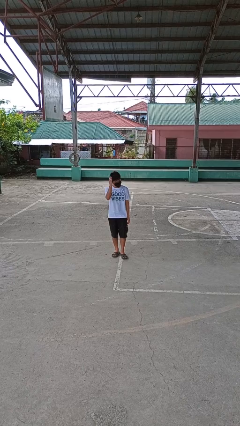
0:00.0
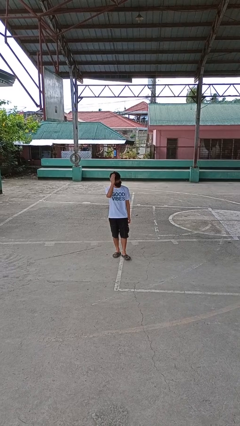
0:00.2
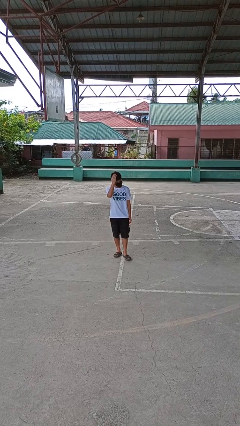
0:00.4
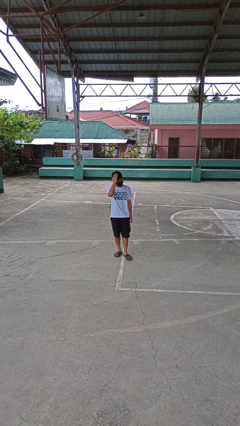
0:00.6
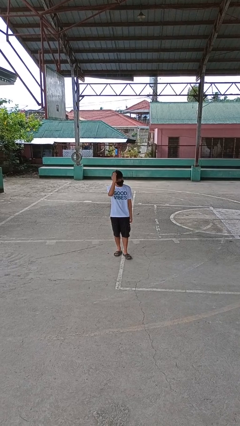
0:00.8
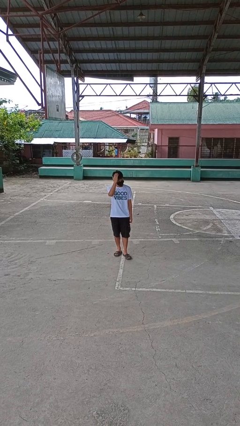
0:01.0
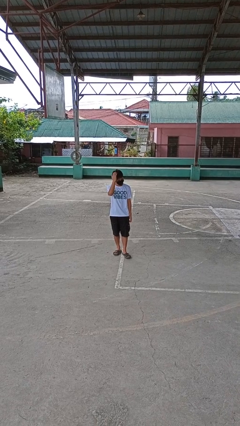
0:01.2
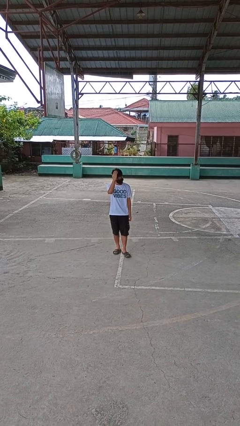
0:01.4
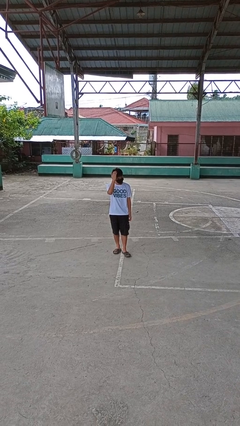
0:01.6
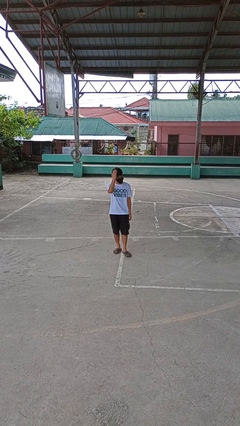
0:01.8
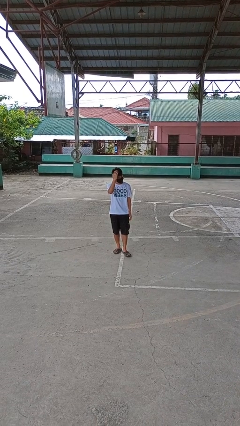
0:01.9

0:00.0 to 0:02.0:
person pats head

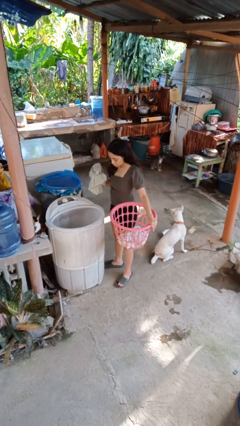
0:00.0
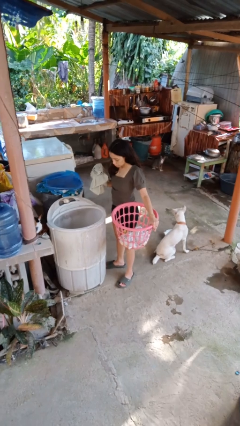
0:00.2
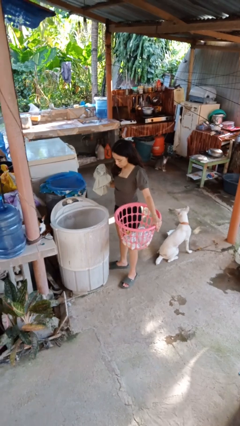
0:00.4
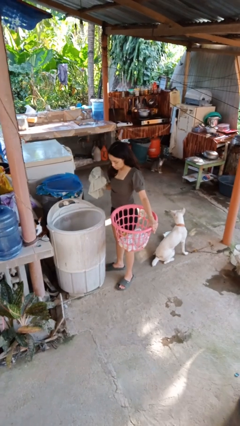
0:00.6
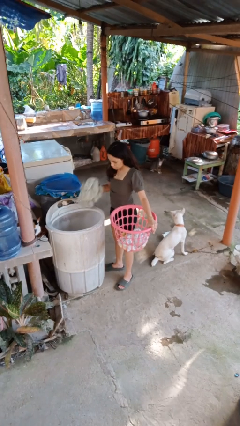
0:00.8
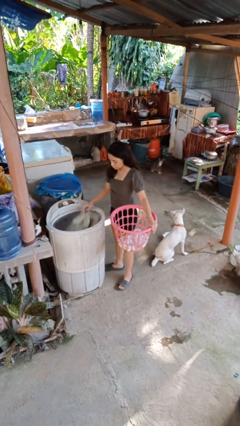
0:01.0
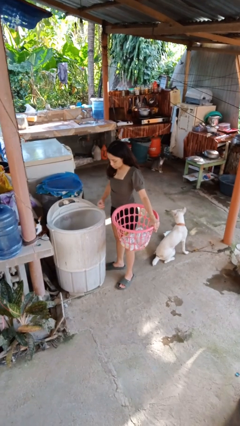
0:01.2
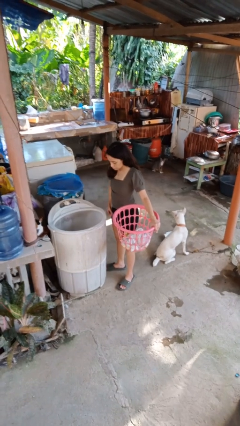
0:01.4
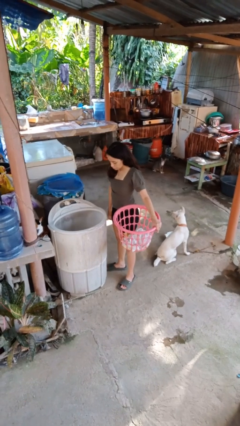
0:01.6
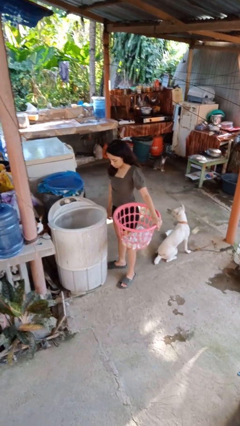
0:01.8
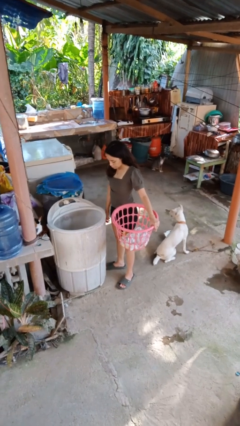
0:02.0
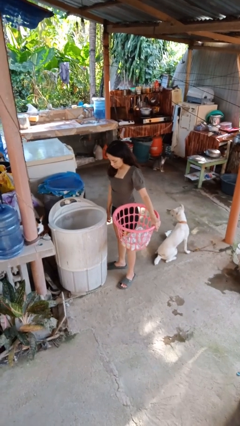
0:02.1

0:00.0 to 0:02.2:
person loads dryer

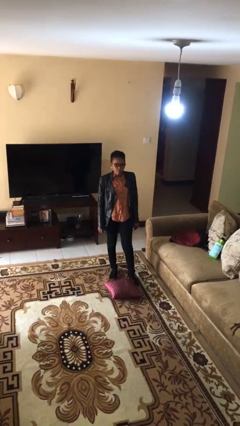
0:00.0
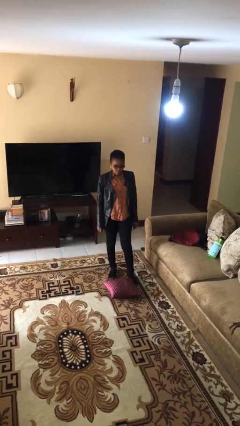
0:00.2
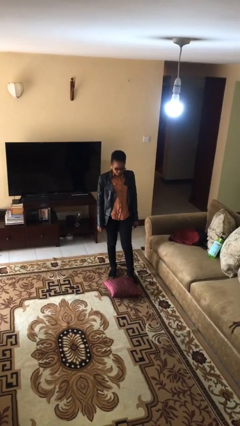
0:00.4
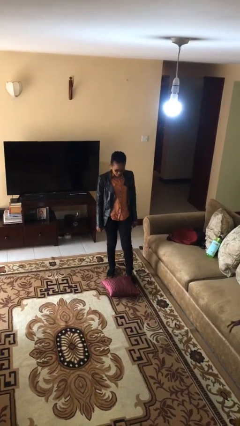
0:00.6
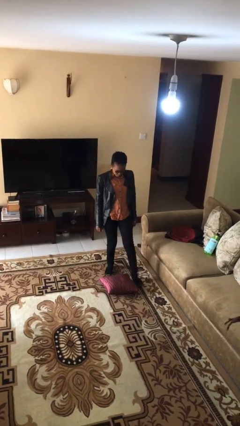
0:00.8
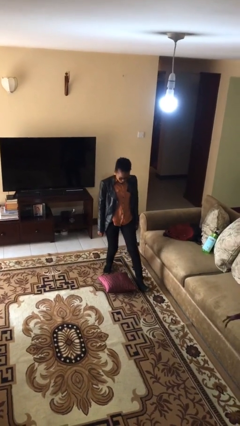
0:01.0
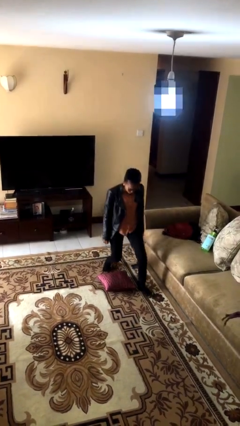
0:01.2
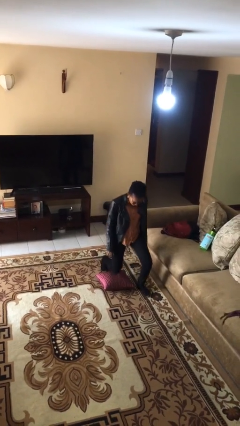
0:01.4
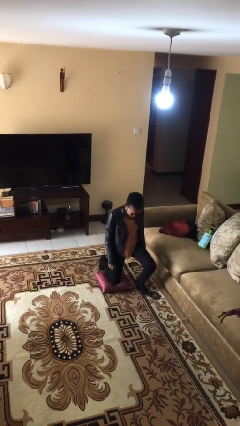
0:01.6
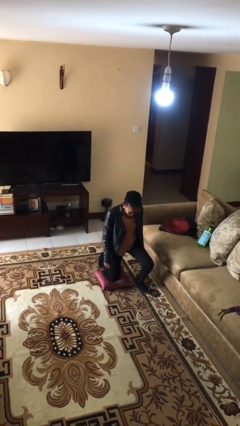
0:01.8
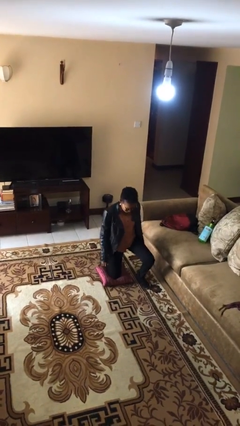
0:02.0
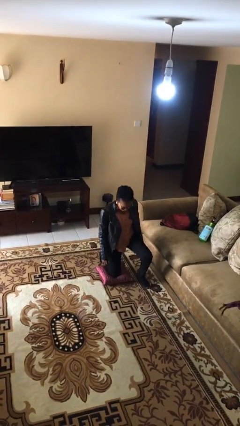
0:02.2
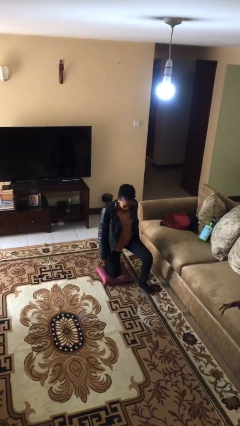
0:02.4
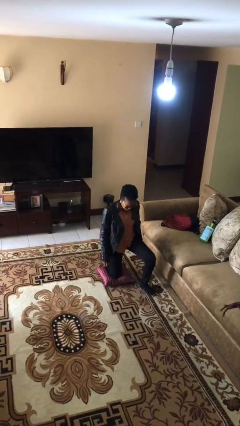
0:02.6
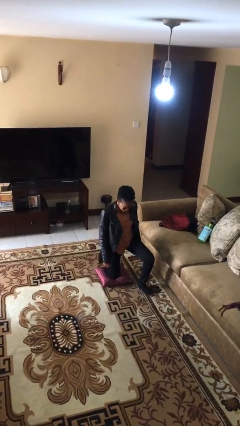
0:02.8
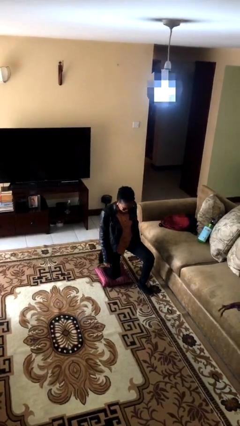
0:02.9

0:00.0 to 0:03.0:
person kneels

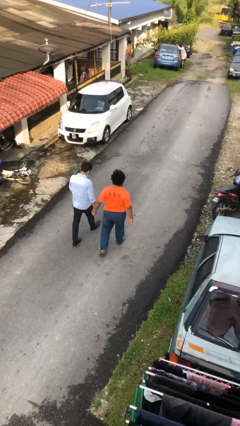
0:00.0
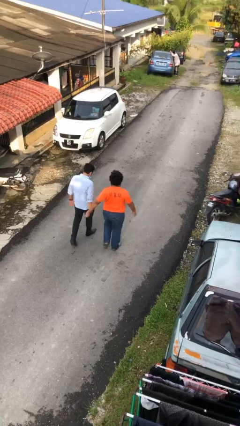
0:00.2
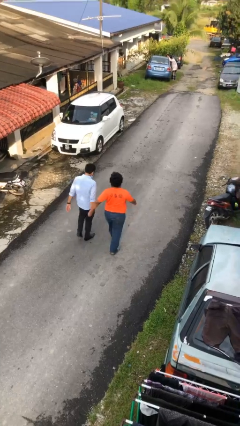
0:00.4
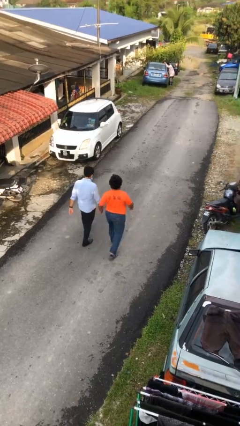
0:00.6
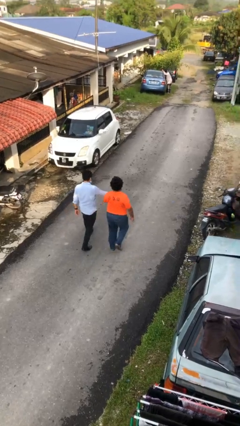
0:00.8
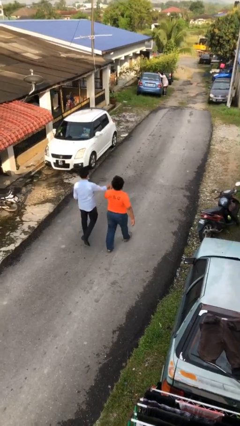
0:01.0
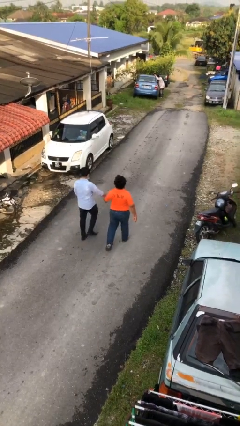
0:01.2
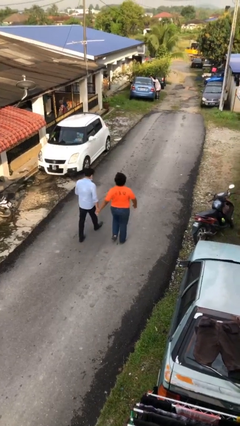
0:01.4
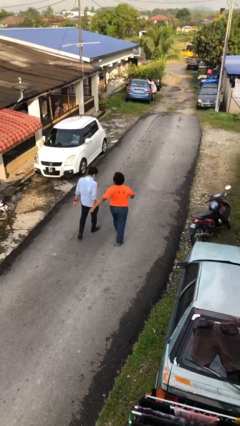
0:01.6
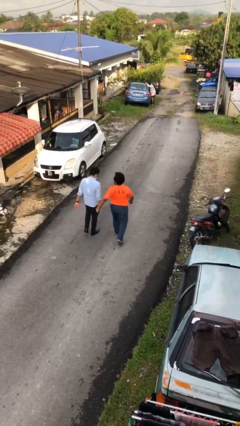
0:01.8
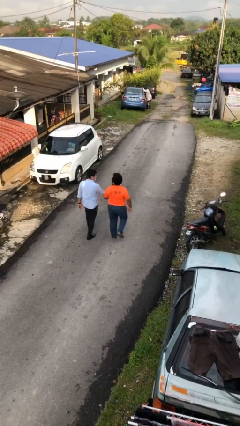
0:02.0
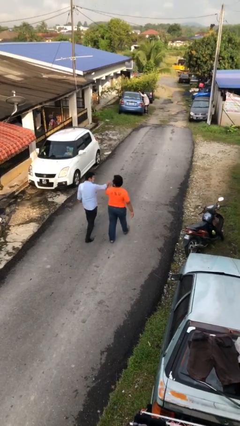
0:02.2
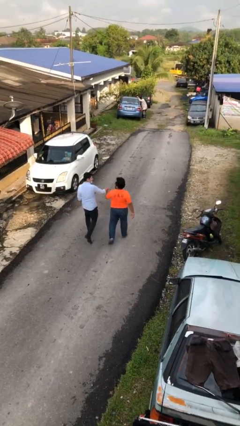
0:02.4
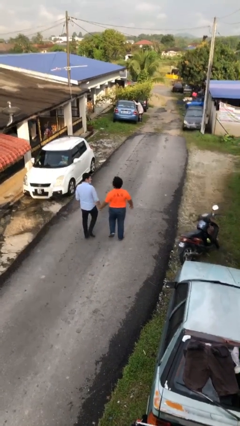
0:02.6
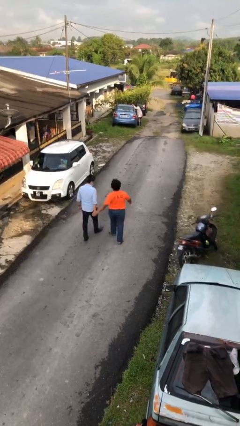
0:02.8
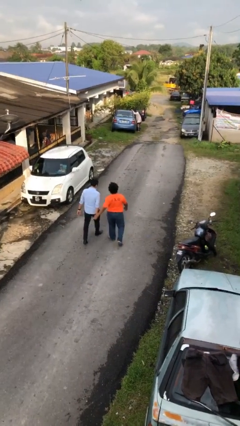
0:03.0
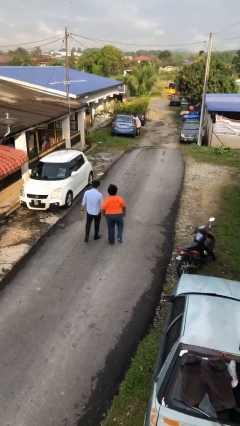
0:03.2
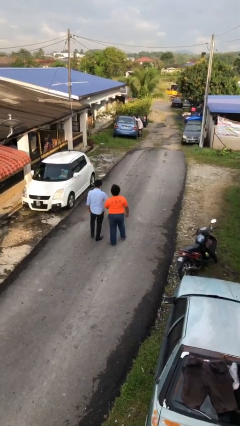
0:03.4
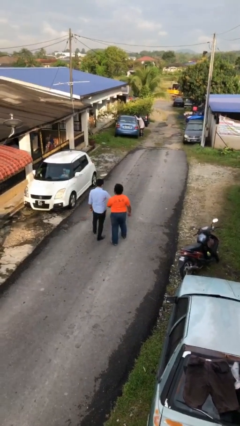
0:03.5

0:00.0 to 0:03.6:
person holds hand

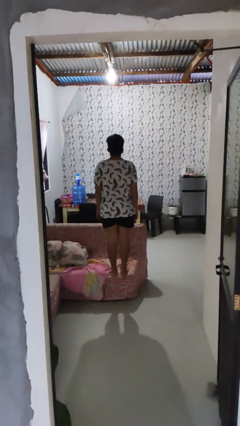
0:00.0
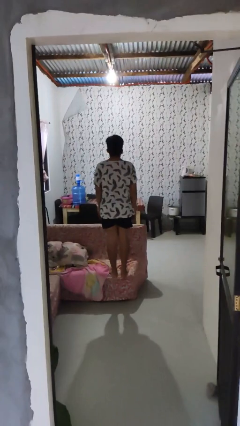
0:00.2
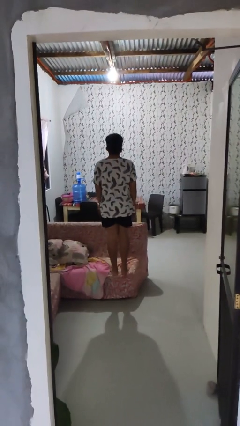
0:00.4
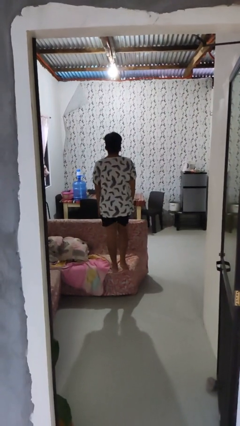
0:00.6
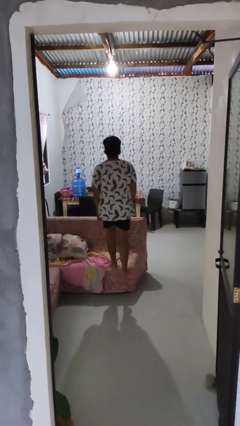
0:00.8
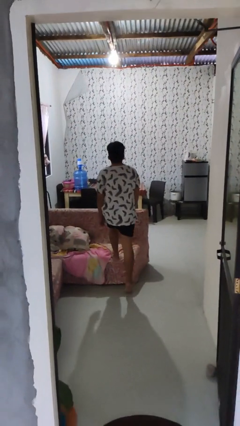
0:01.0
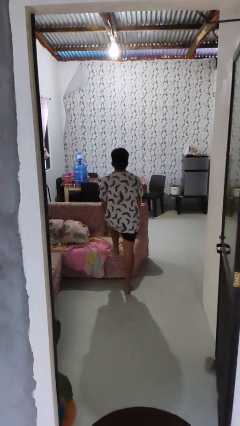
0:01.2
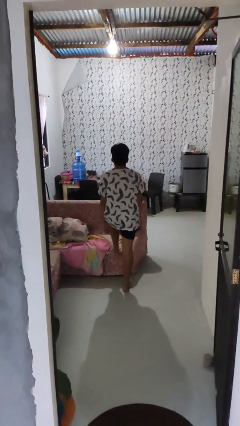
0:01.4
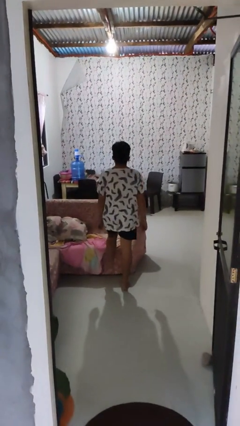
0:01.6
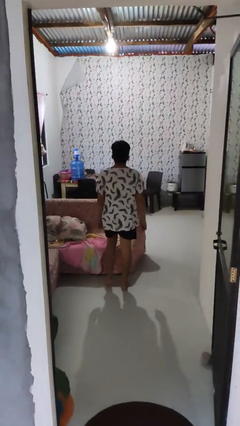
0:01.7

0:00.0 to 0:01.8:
person climbs off couch

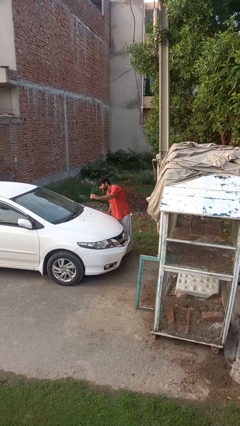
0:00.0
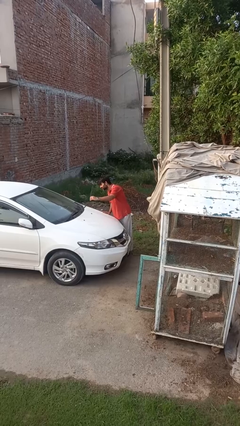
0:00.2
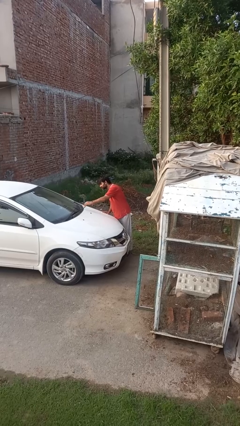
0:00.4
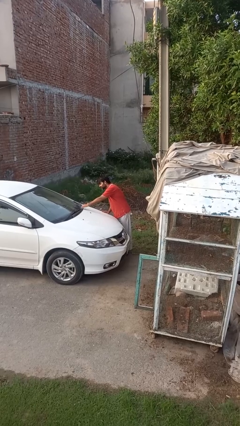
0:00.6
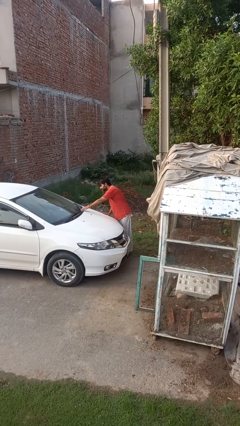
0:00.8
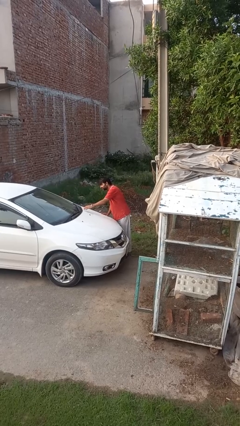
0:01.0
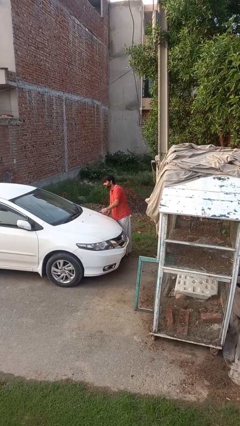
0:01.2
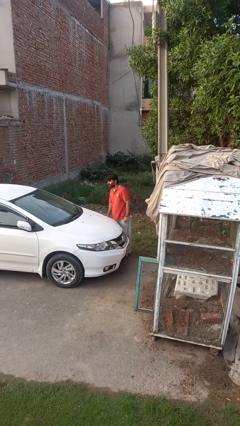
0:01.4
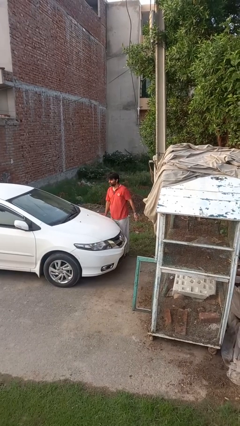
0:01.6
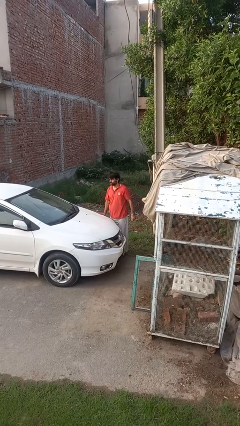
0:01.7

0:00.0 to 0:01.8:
person flips down car wipers

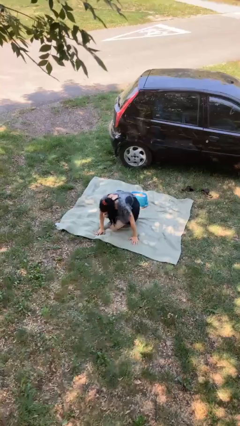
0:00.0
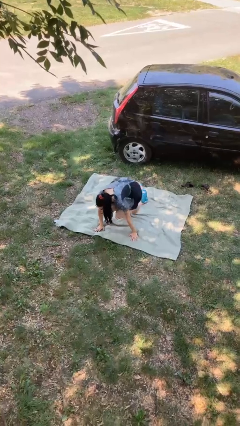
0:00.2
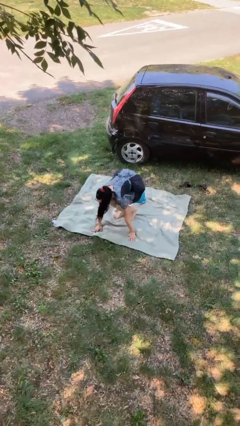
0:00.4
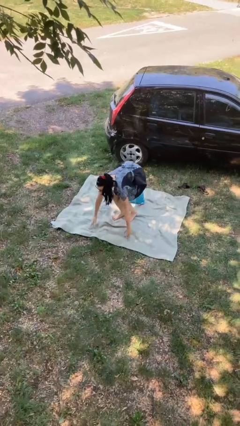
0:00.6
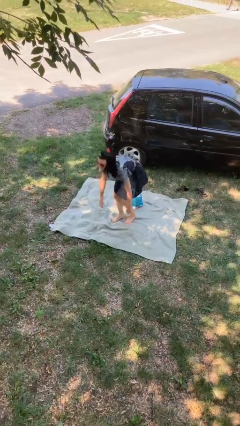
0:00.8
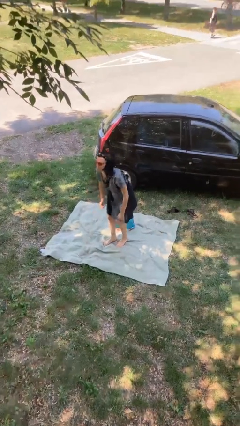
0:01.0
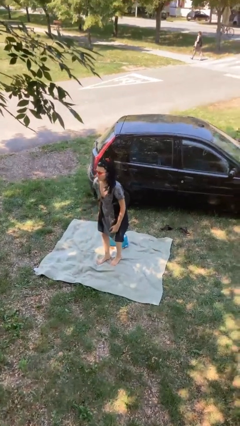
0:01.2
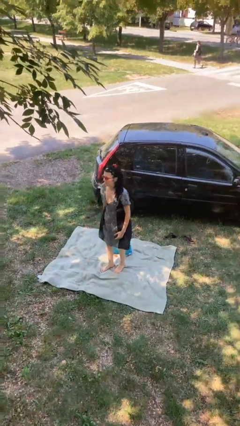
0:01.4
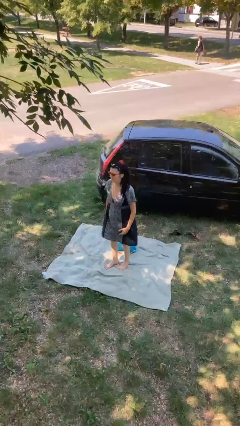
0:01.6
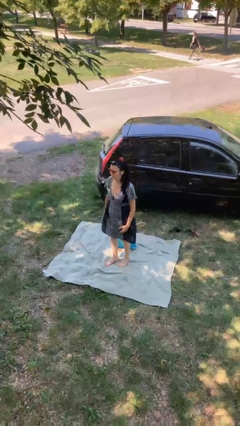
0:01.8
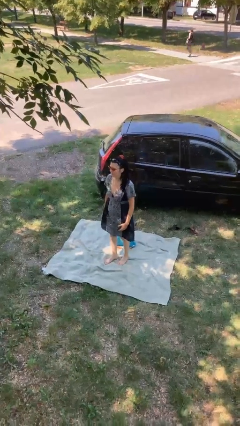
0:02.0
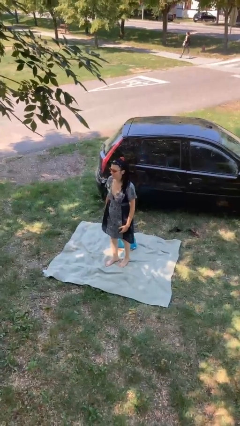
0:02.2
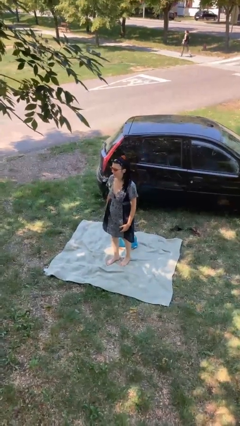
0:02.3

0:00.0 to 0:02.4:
person stands up from floor

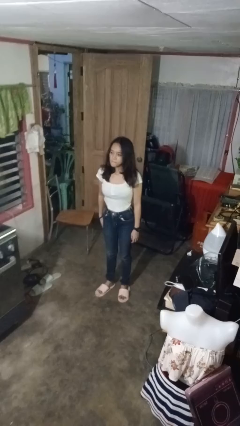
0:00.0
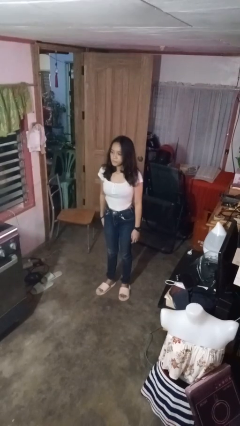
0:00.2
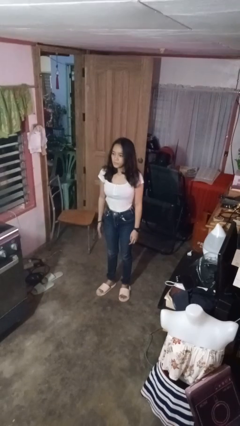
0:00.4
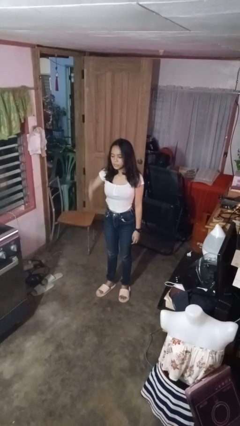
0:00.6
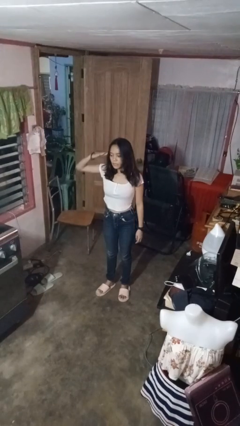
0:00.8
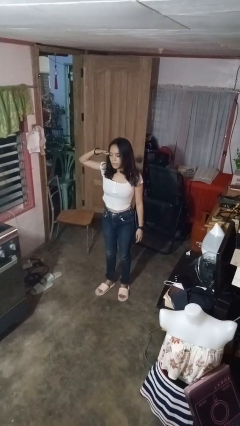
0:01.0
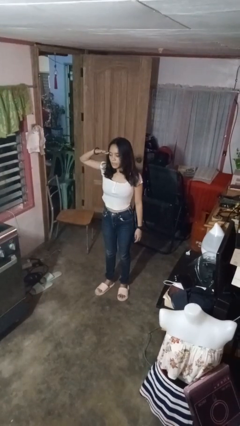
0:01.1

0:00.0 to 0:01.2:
person salutes
